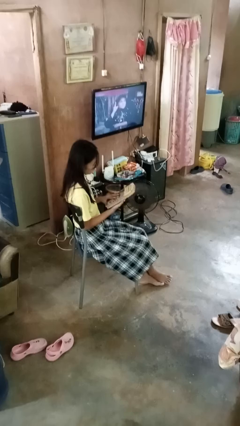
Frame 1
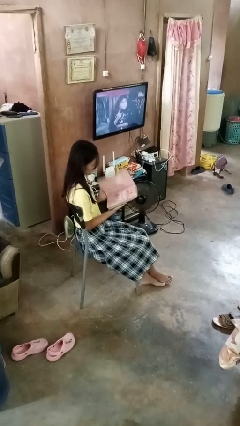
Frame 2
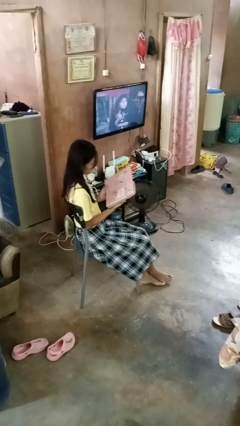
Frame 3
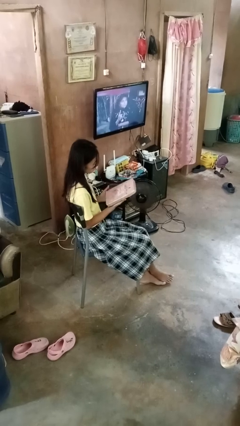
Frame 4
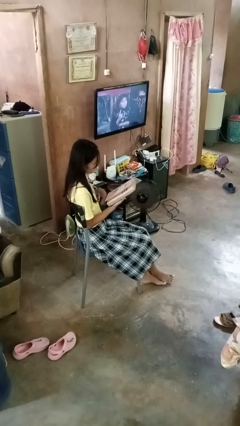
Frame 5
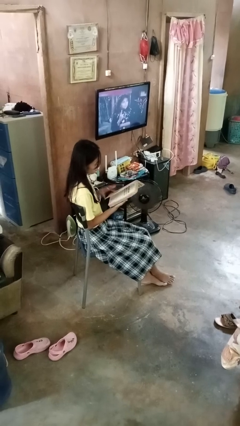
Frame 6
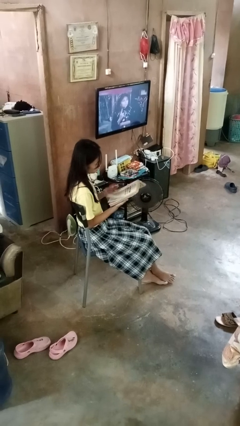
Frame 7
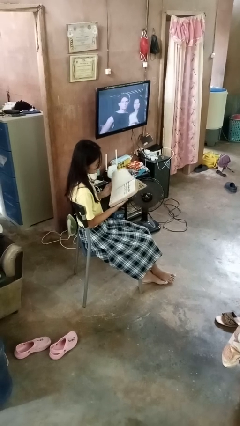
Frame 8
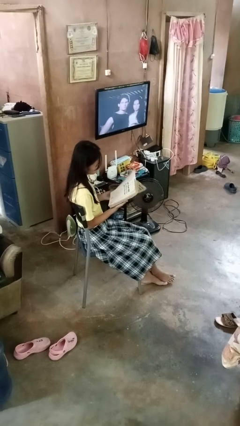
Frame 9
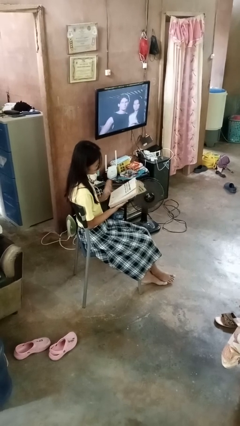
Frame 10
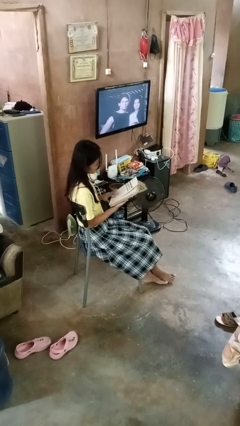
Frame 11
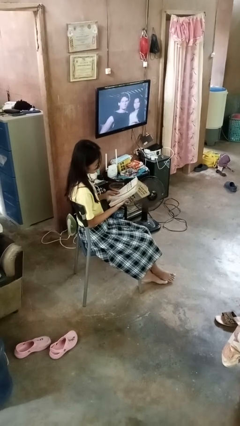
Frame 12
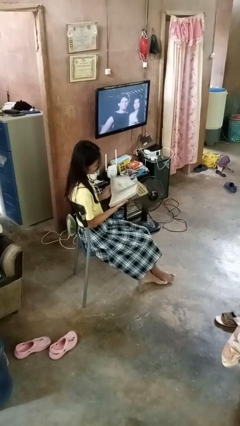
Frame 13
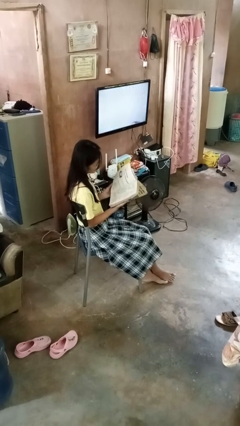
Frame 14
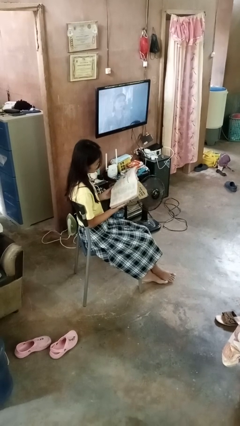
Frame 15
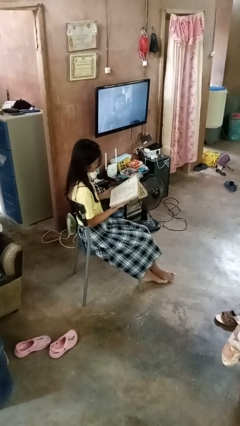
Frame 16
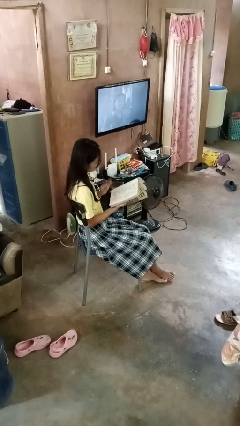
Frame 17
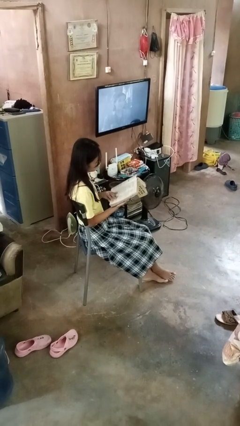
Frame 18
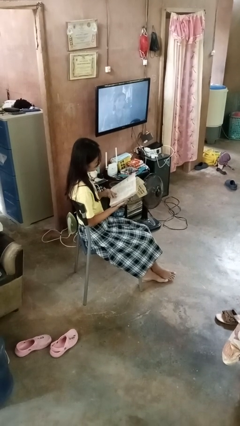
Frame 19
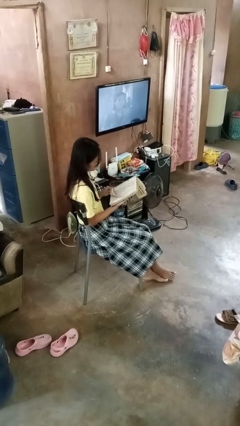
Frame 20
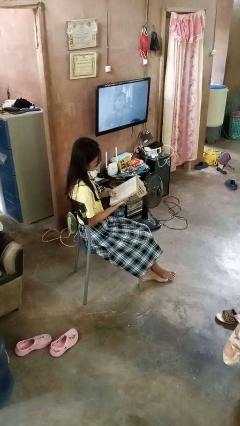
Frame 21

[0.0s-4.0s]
person reads book

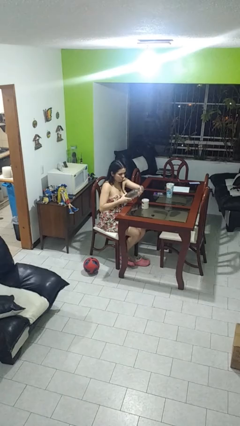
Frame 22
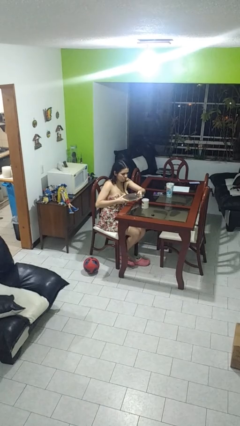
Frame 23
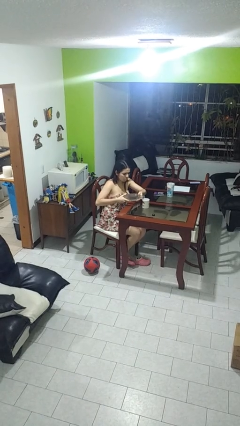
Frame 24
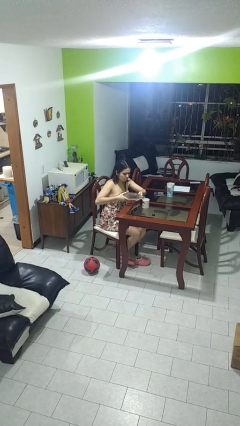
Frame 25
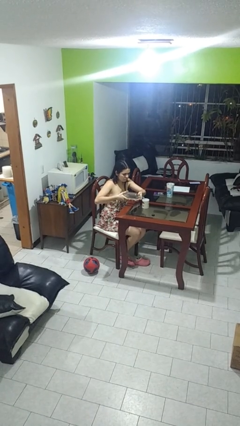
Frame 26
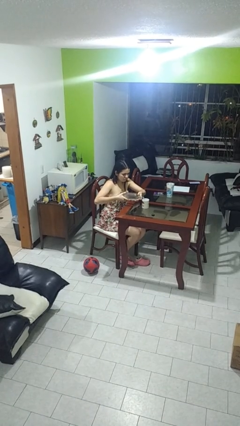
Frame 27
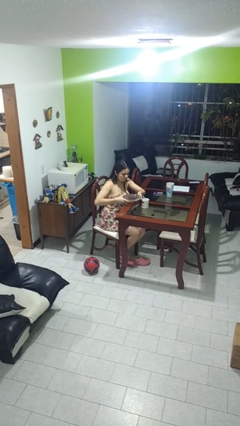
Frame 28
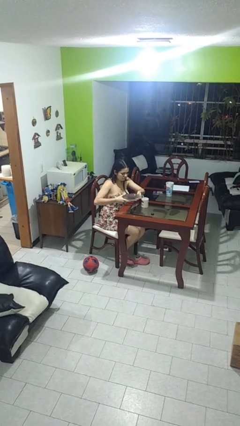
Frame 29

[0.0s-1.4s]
person pours liquid into cup

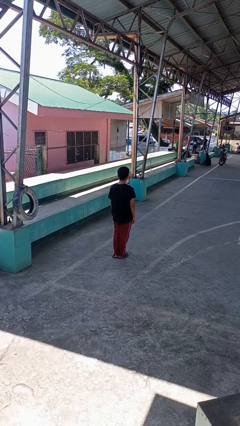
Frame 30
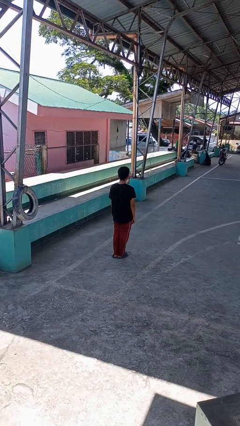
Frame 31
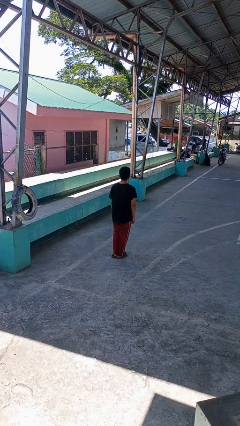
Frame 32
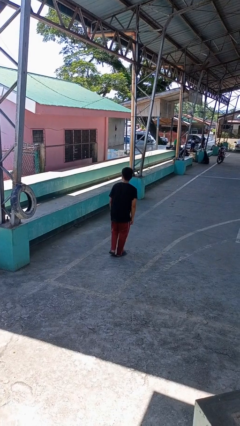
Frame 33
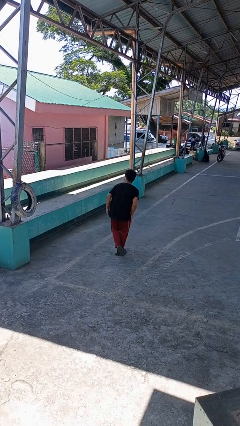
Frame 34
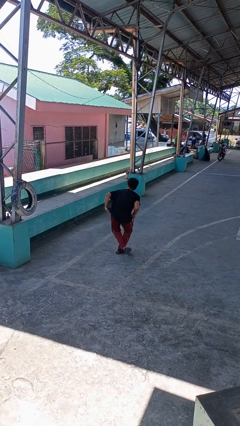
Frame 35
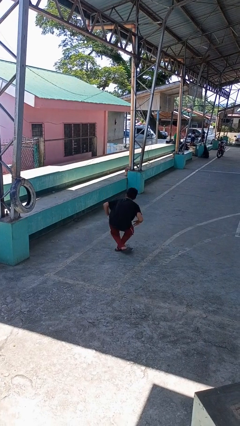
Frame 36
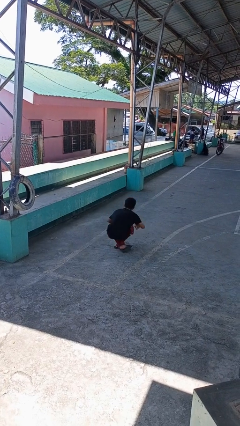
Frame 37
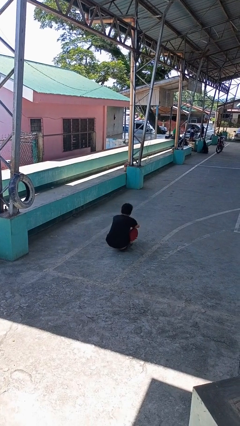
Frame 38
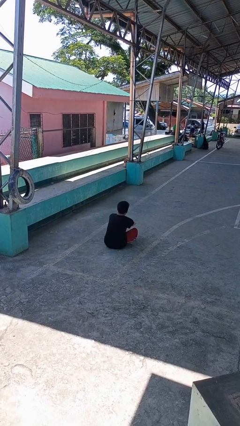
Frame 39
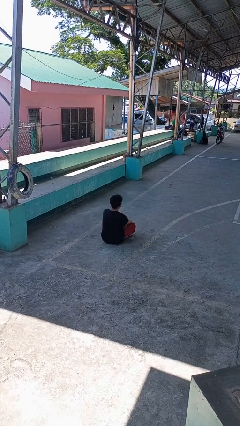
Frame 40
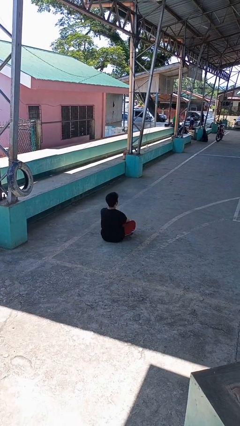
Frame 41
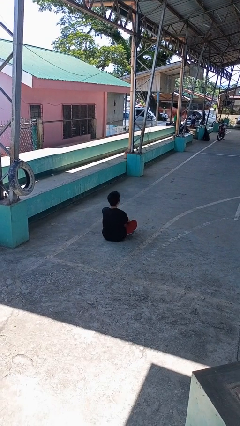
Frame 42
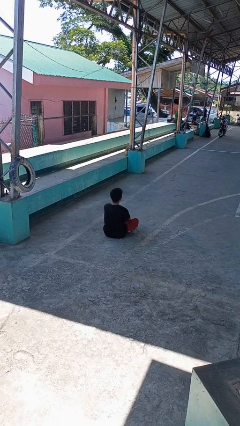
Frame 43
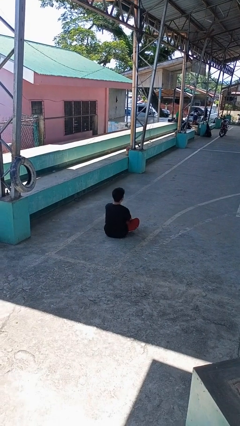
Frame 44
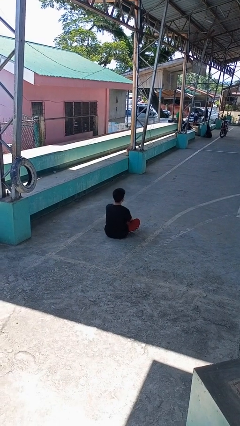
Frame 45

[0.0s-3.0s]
person sits crisscross

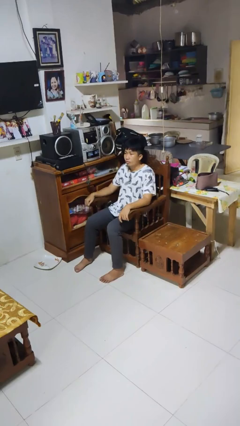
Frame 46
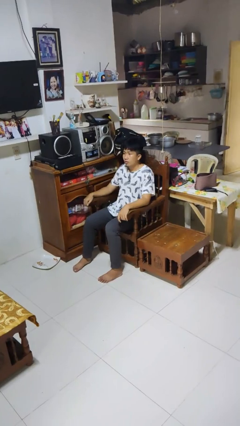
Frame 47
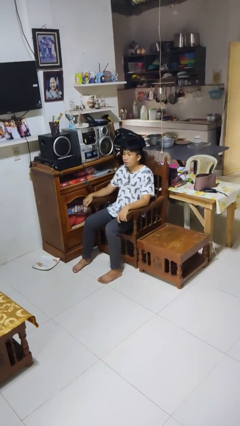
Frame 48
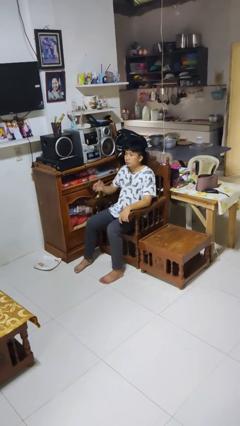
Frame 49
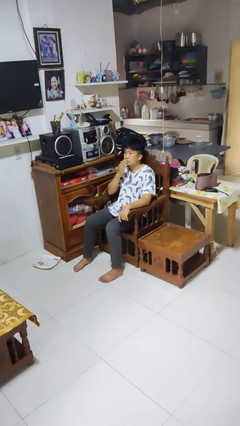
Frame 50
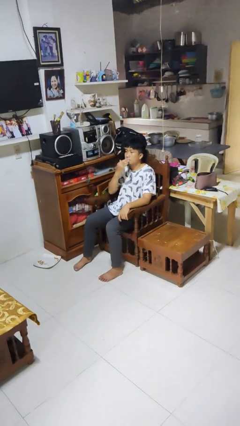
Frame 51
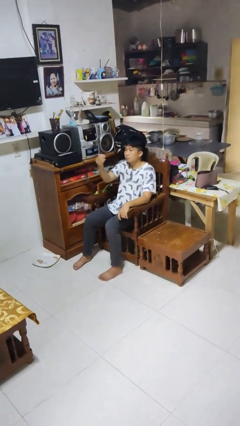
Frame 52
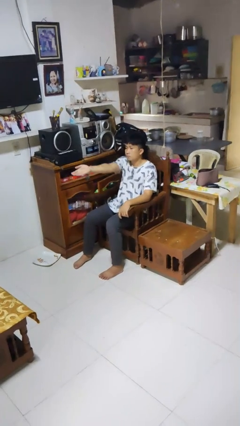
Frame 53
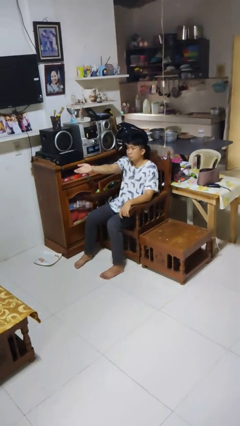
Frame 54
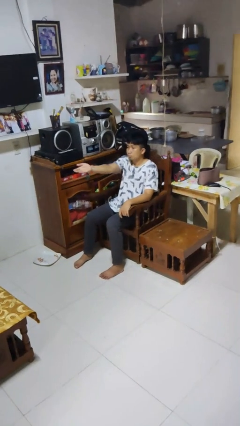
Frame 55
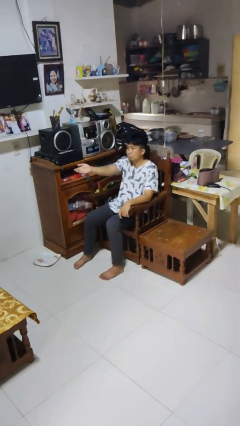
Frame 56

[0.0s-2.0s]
person gestures blow kiss

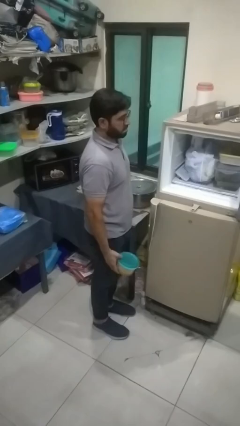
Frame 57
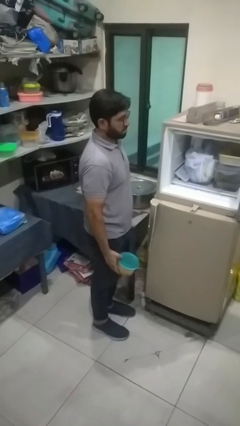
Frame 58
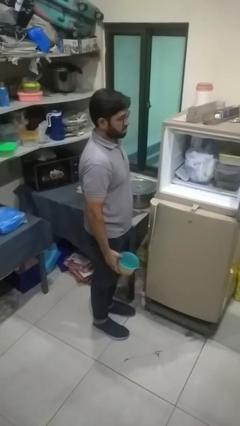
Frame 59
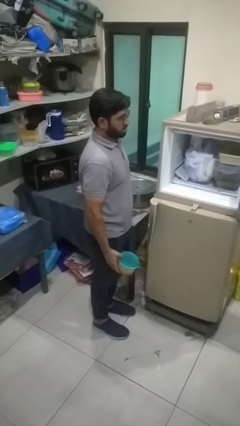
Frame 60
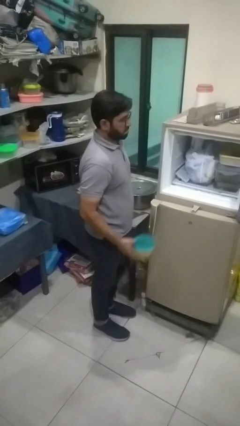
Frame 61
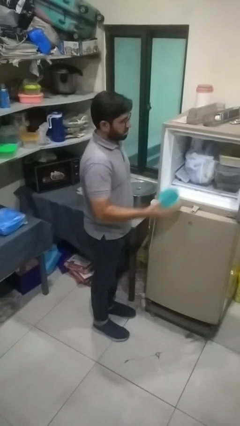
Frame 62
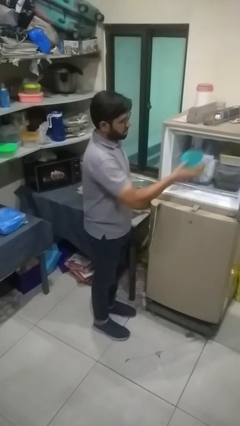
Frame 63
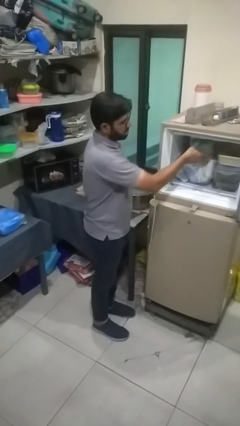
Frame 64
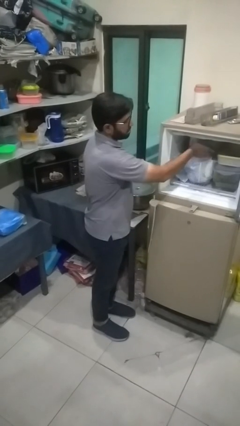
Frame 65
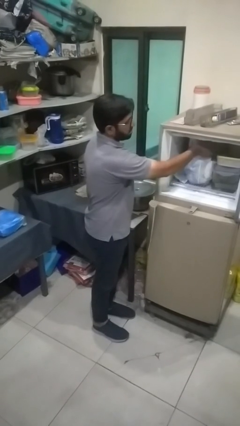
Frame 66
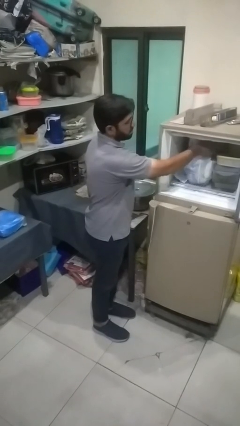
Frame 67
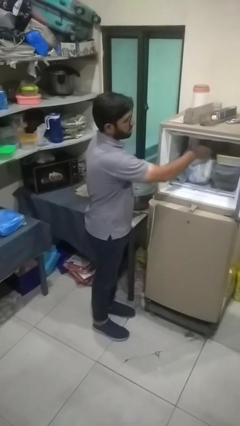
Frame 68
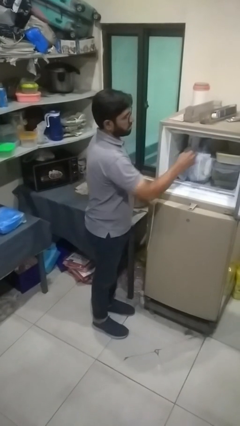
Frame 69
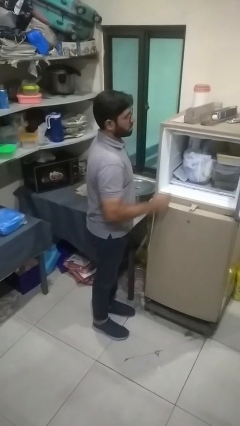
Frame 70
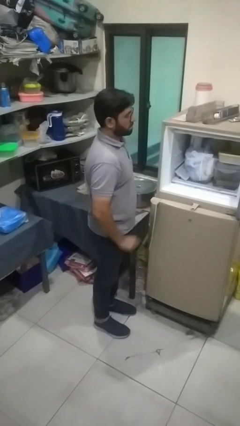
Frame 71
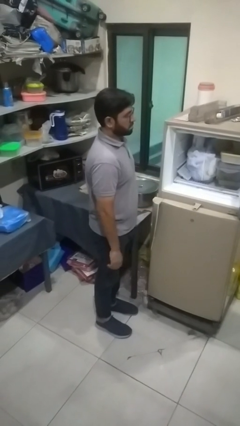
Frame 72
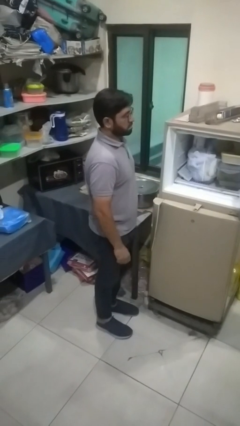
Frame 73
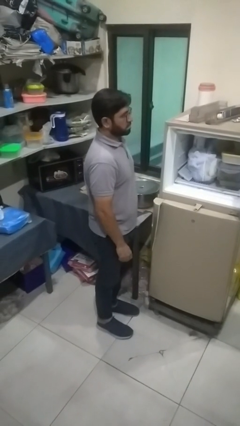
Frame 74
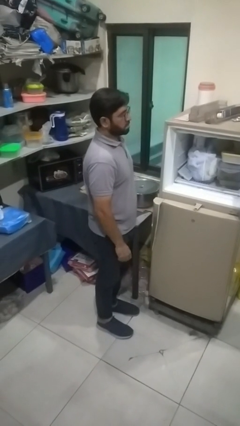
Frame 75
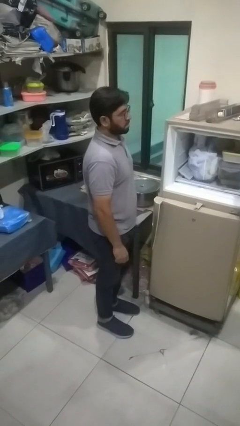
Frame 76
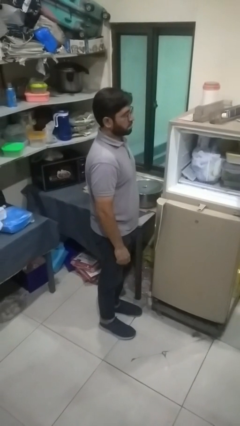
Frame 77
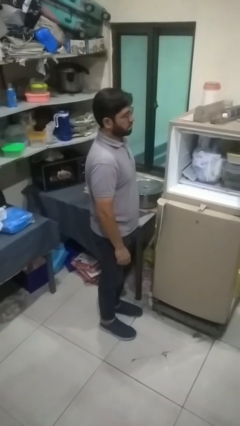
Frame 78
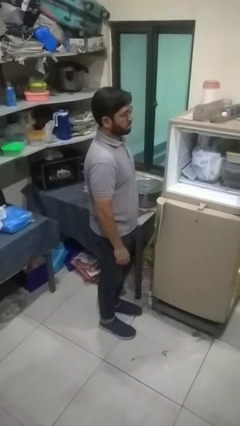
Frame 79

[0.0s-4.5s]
person puts object into refrigerator

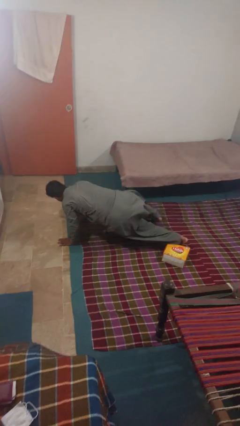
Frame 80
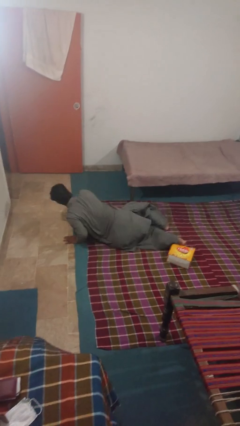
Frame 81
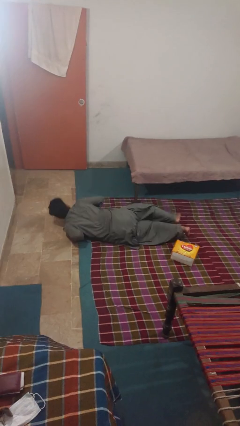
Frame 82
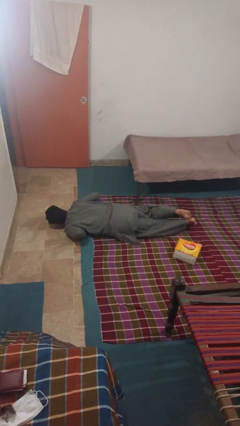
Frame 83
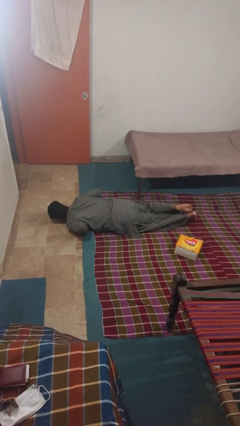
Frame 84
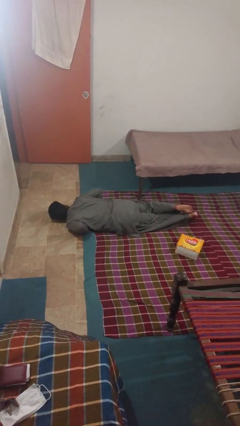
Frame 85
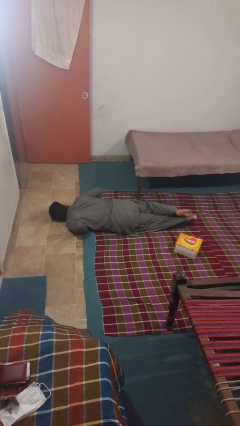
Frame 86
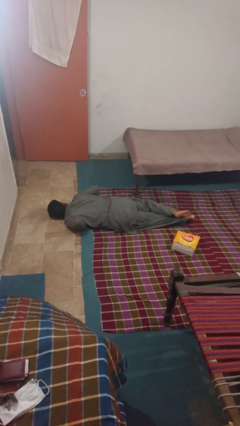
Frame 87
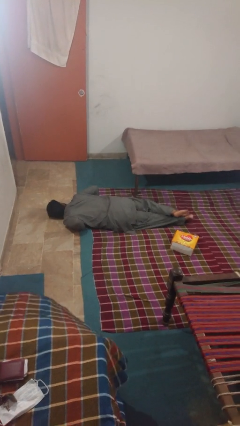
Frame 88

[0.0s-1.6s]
person lies down on floor

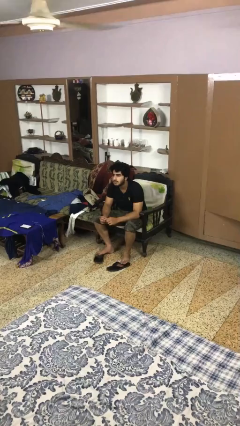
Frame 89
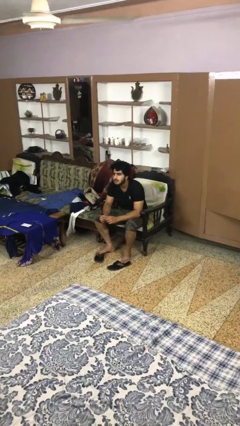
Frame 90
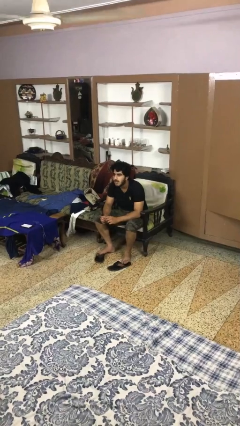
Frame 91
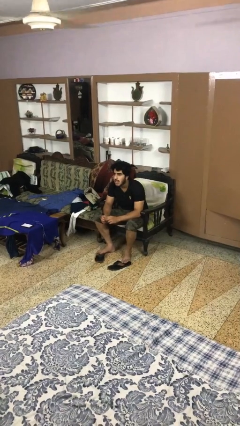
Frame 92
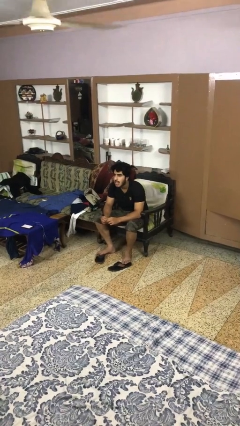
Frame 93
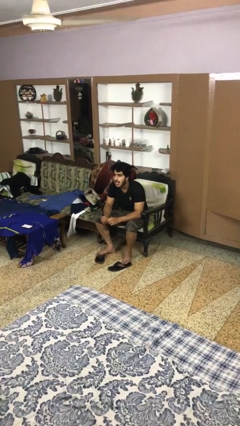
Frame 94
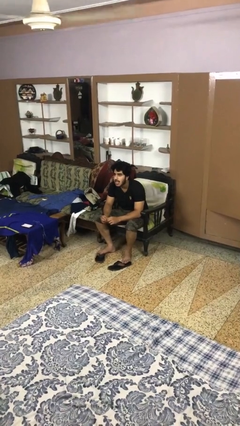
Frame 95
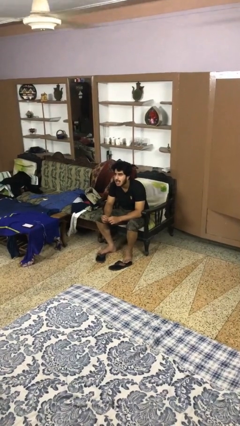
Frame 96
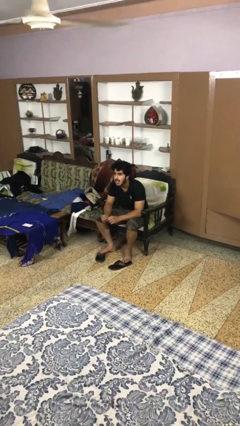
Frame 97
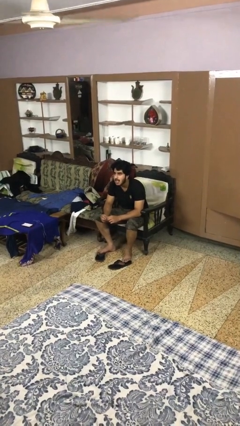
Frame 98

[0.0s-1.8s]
person sticks out tongue
